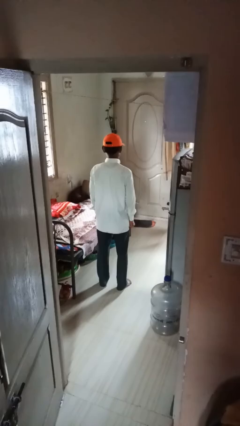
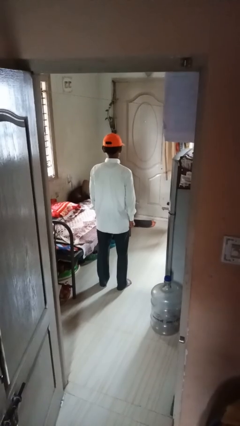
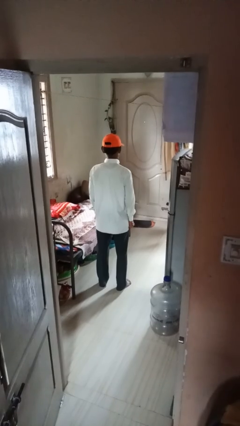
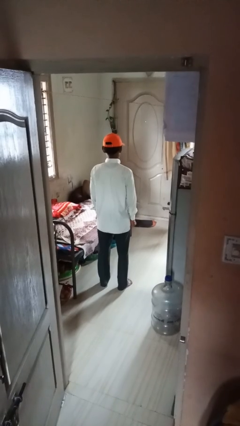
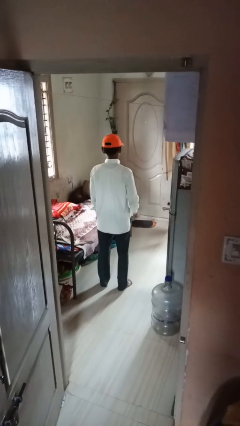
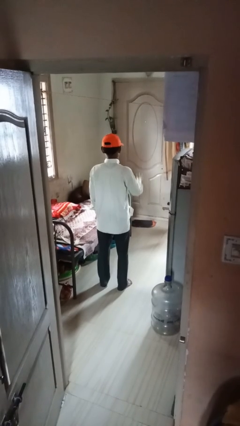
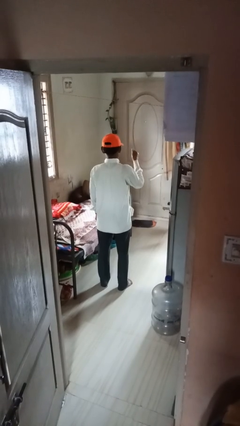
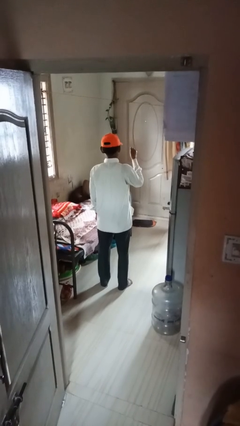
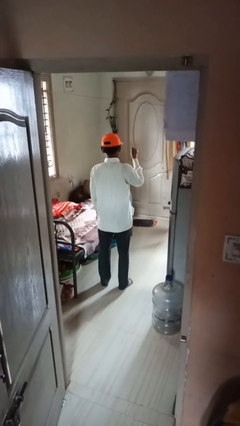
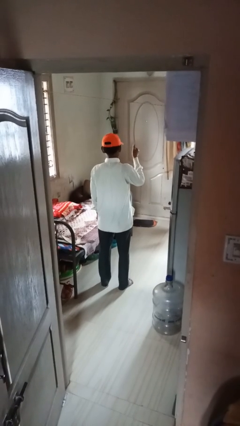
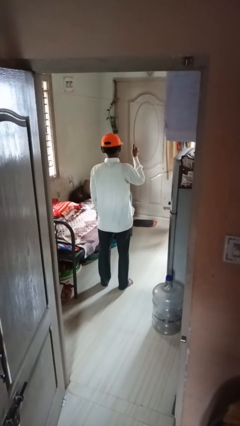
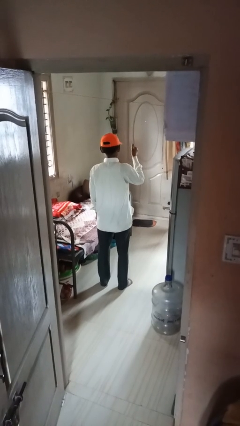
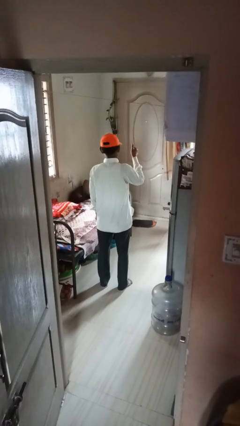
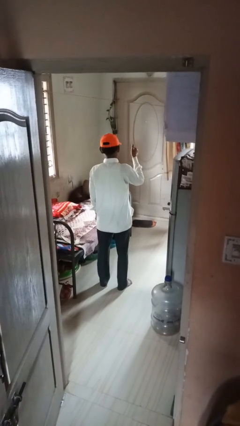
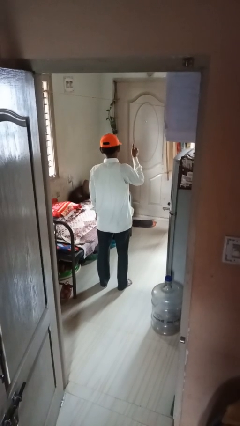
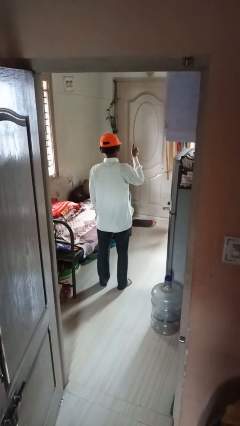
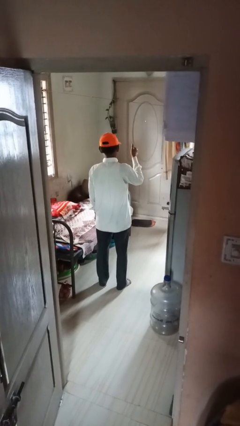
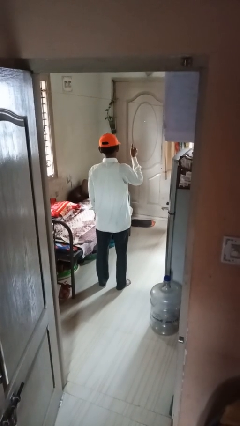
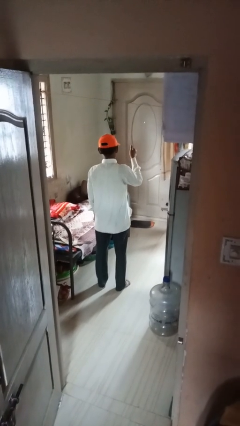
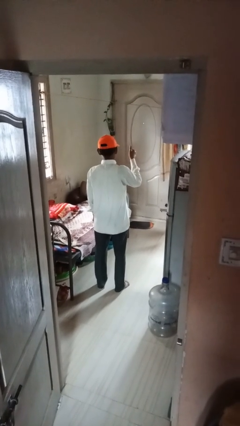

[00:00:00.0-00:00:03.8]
person gestures thumbs up

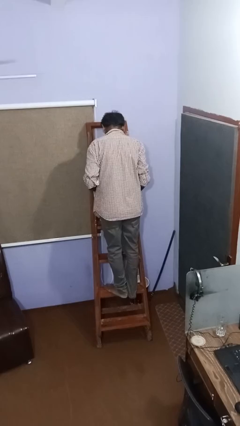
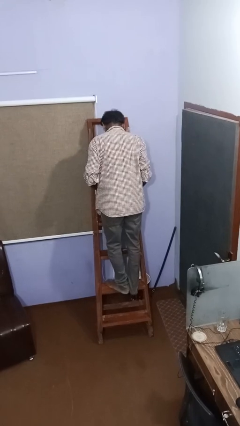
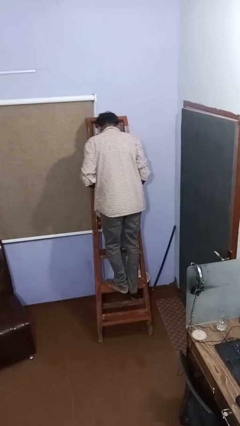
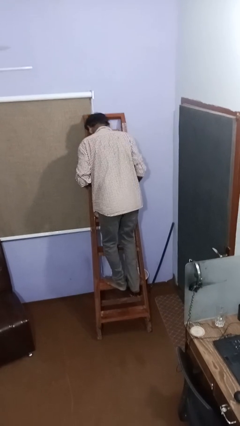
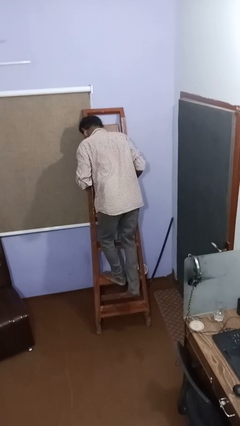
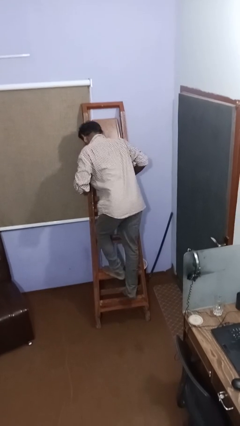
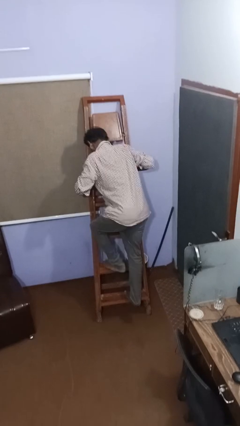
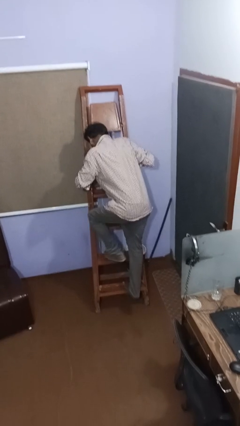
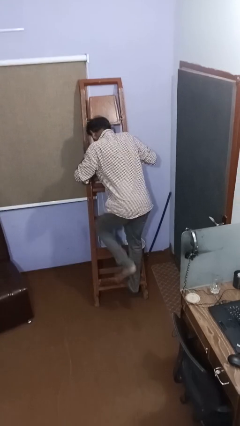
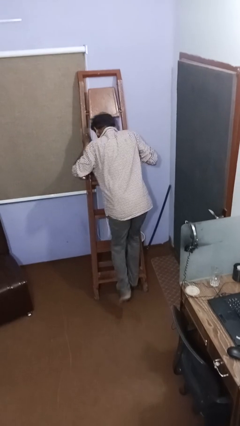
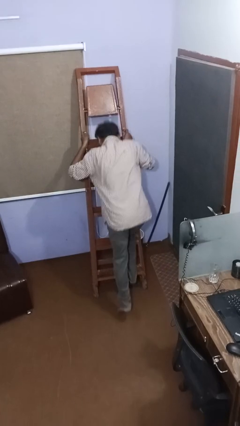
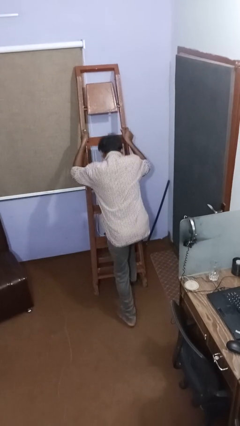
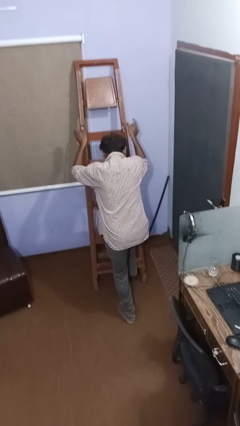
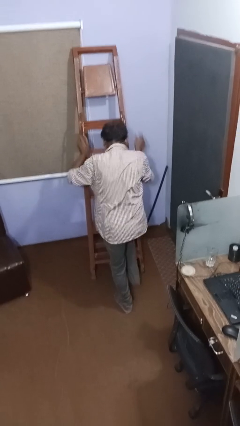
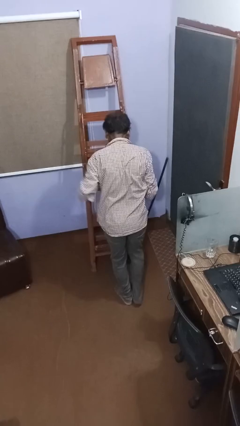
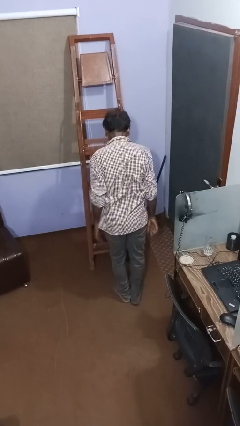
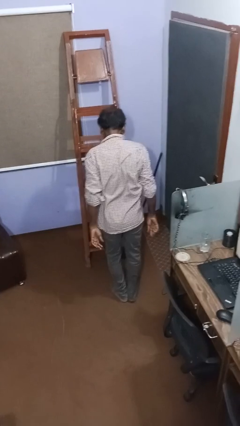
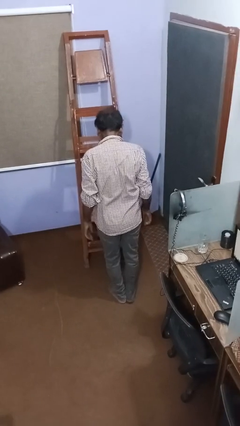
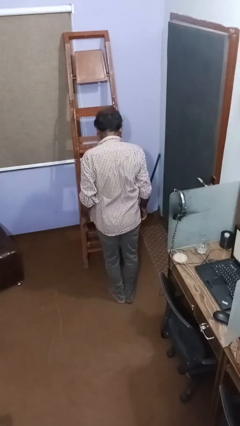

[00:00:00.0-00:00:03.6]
person climbs down ladder

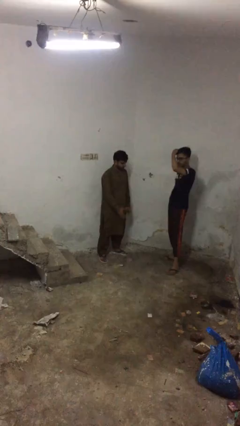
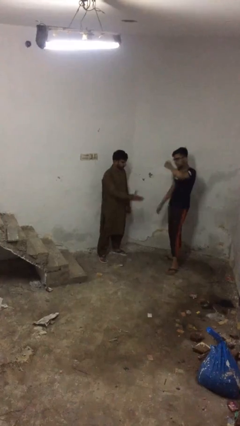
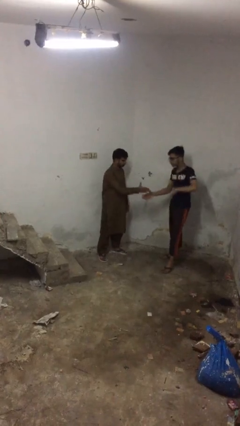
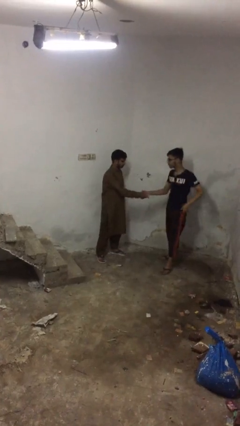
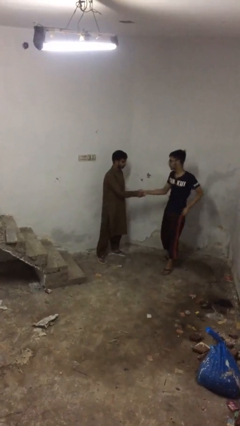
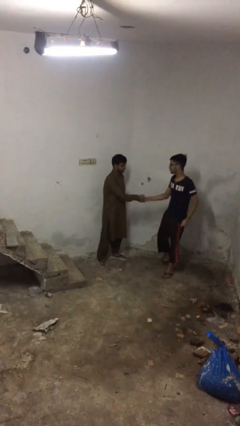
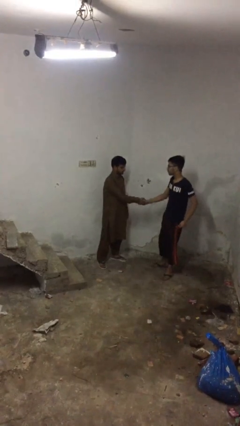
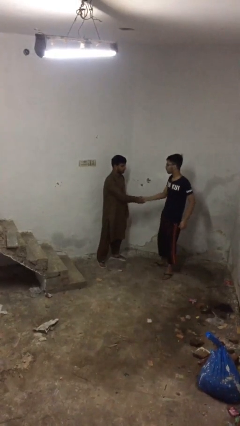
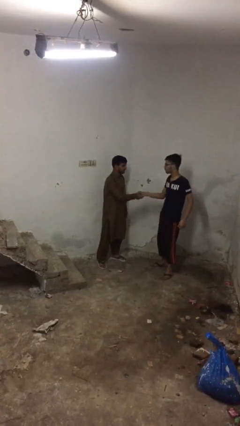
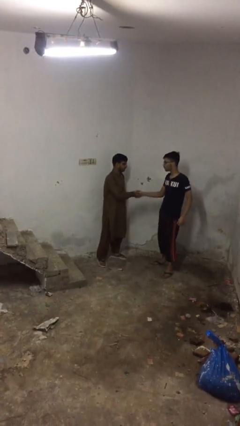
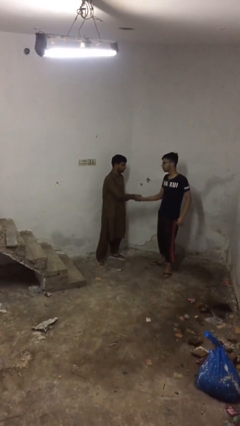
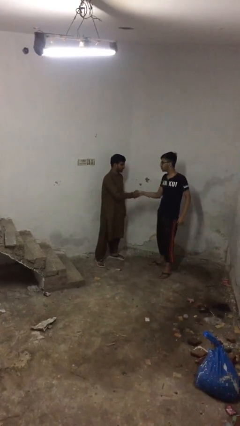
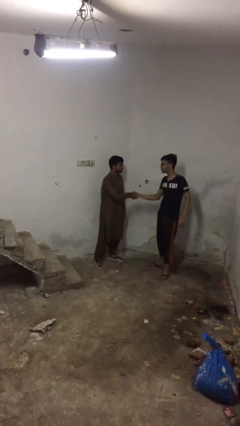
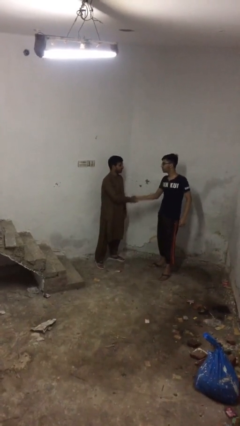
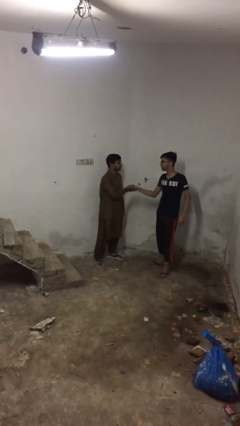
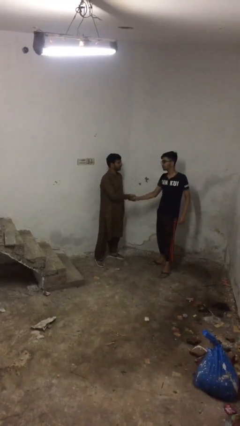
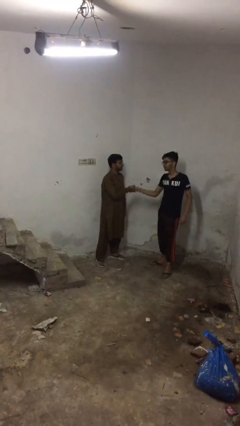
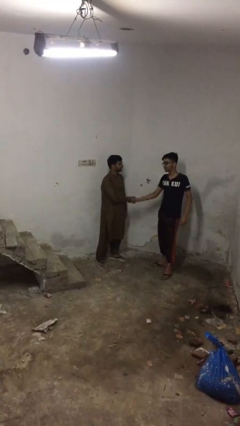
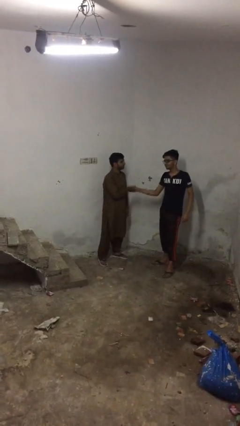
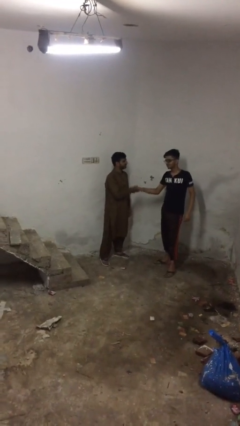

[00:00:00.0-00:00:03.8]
person shakes hand

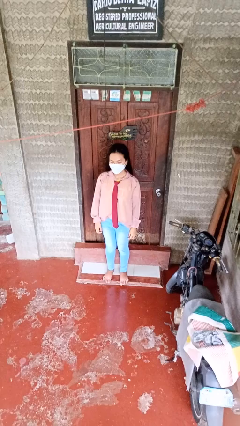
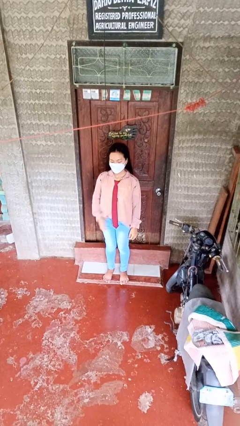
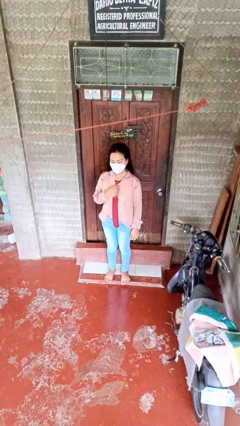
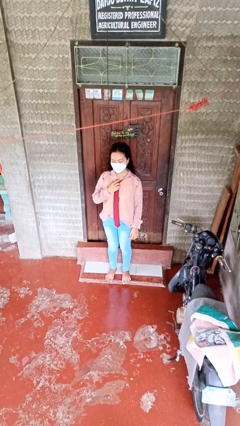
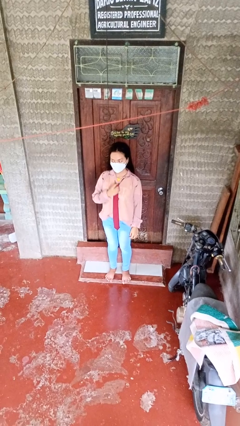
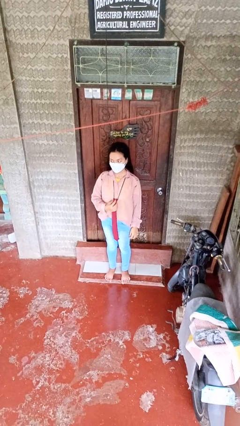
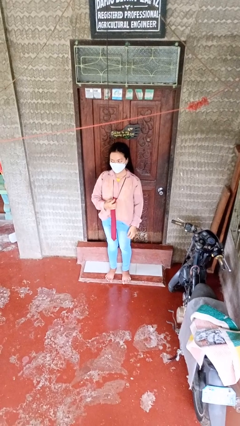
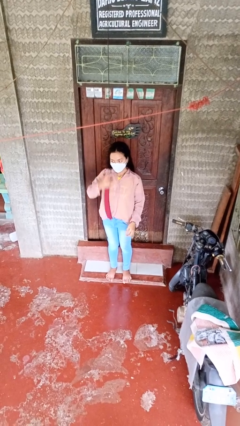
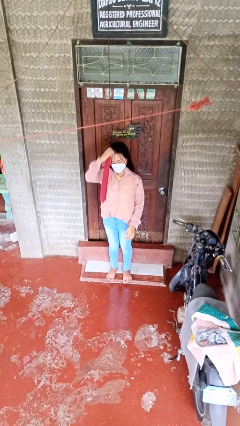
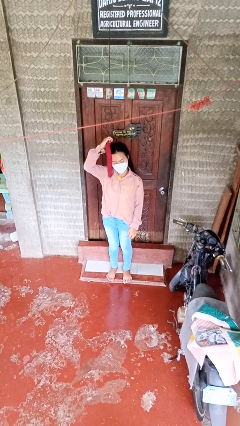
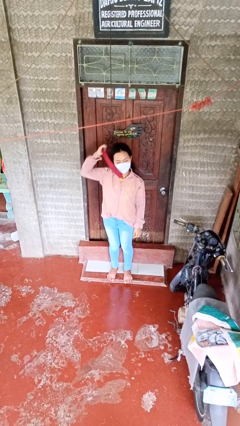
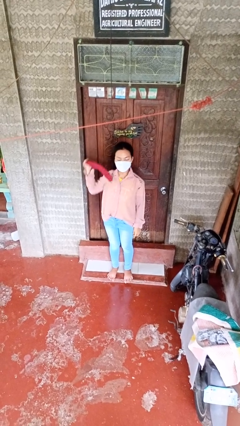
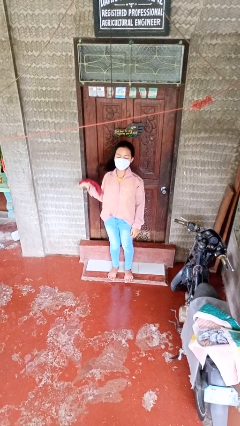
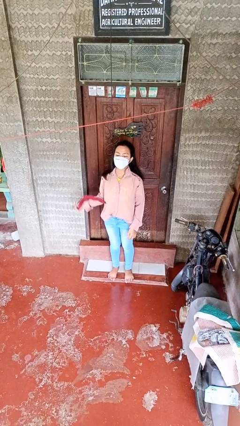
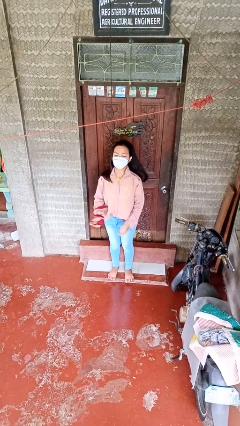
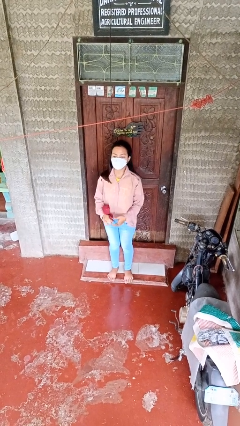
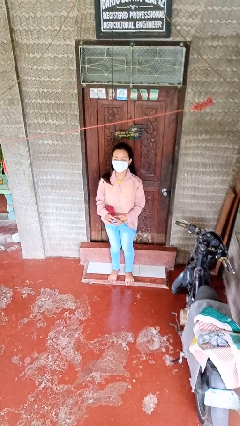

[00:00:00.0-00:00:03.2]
person takes off necktie

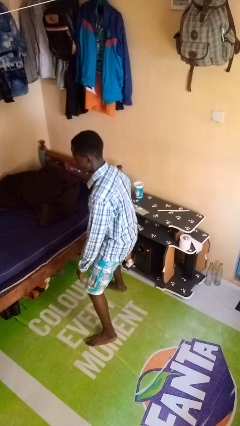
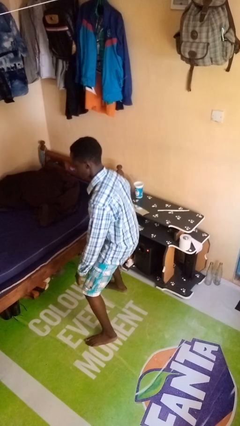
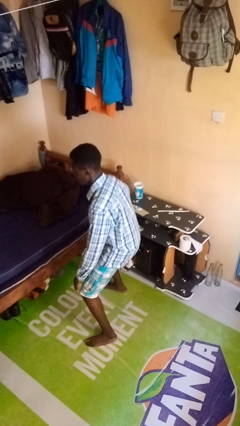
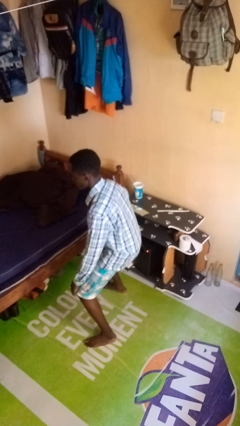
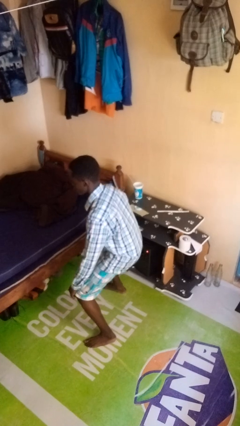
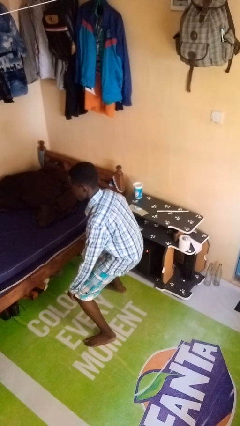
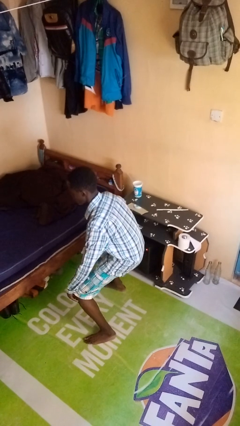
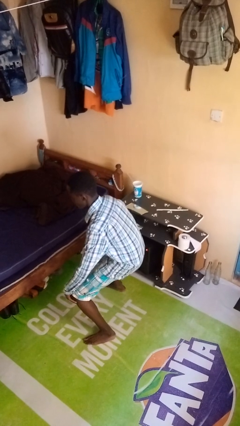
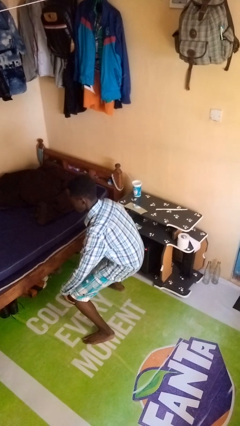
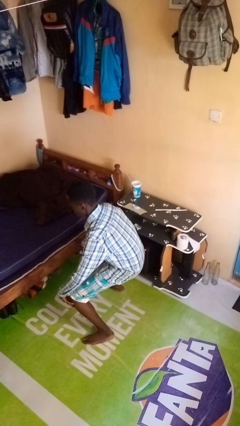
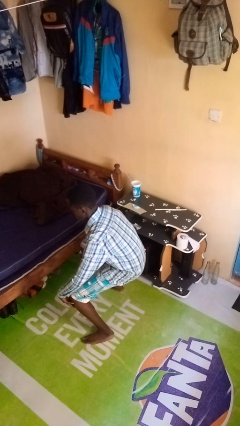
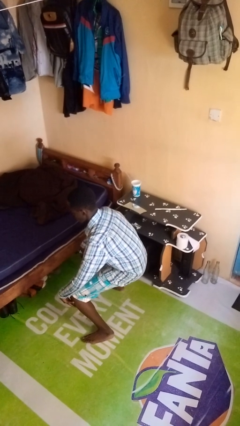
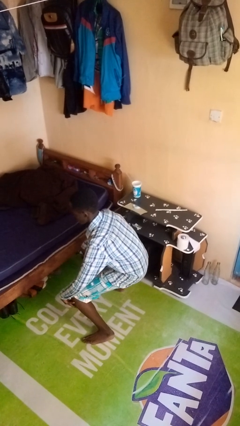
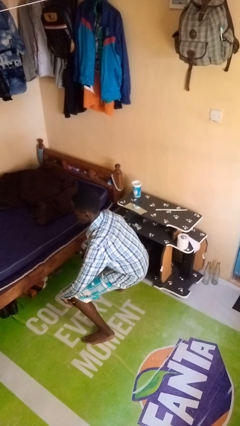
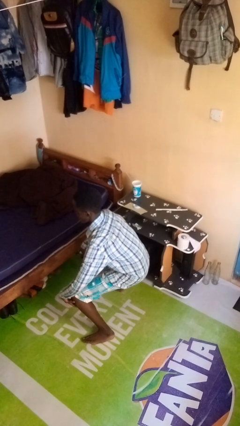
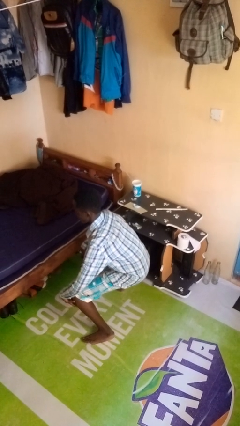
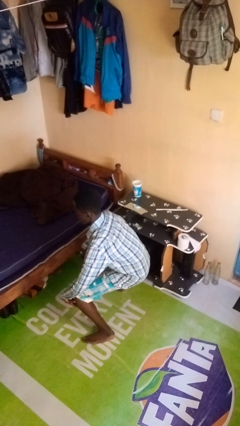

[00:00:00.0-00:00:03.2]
person squats
